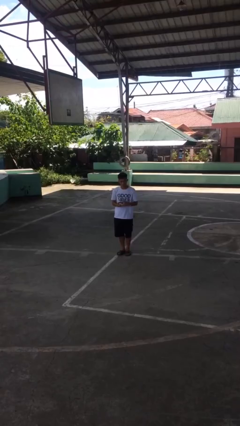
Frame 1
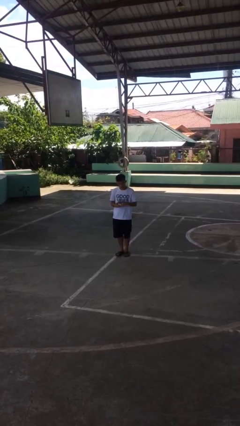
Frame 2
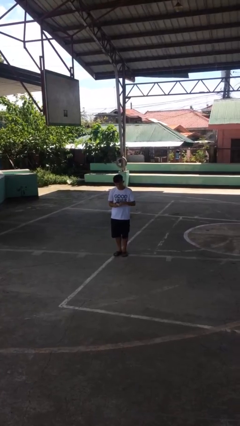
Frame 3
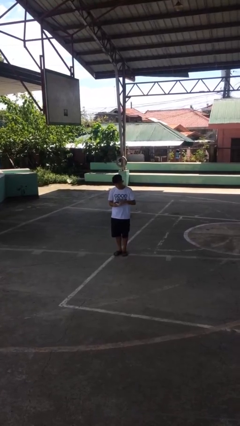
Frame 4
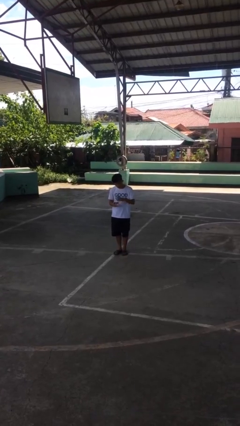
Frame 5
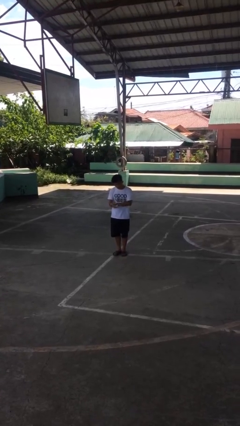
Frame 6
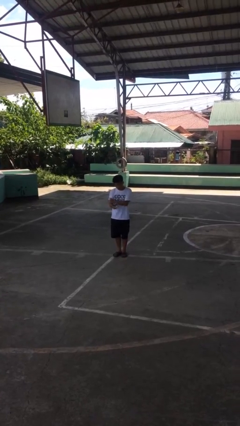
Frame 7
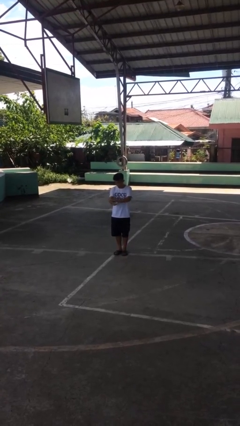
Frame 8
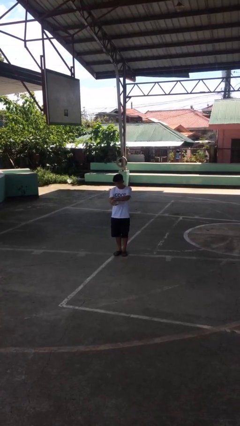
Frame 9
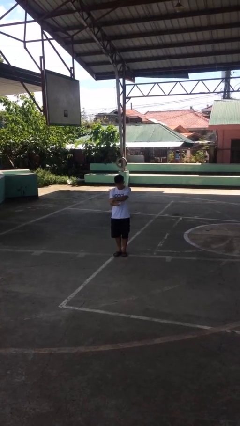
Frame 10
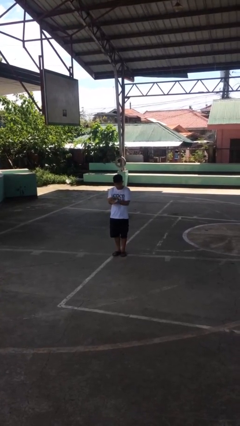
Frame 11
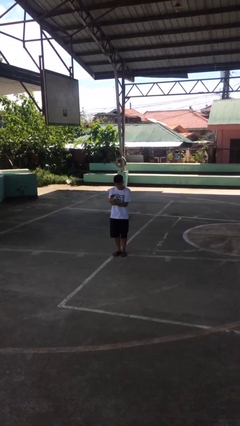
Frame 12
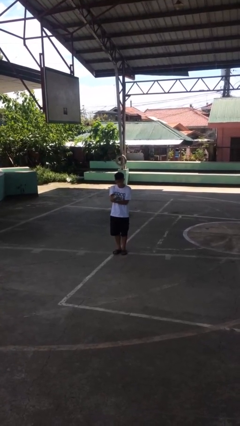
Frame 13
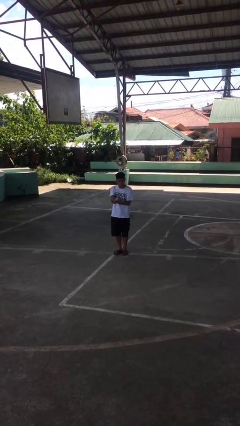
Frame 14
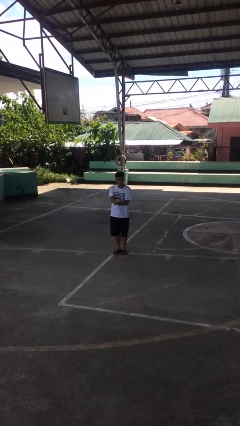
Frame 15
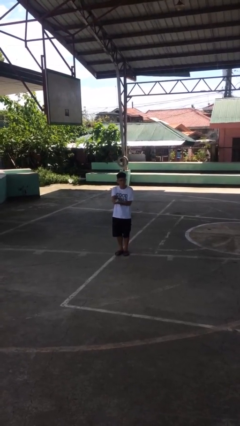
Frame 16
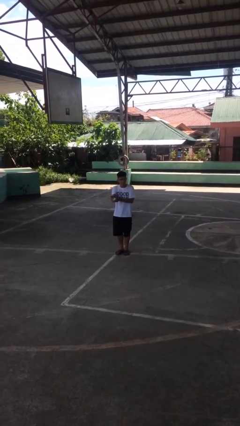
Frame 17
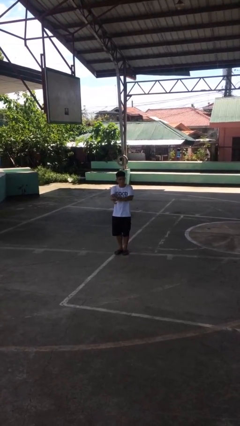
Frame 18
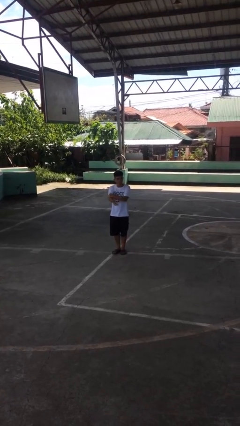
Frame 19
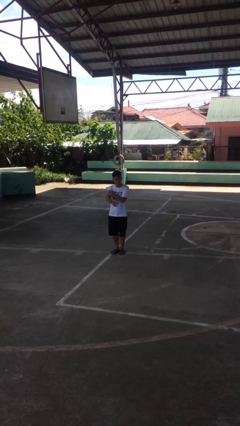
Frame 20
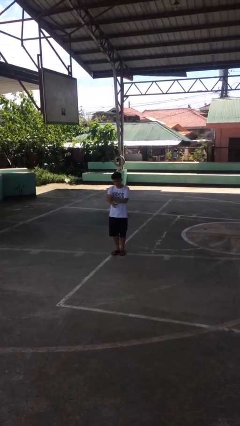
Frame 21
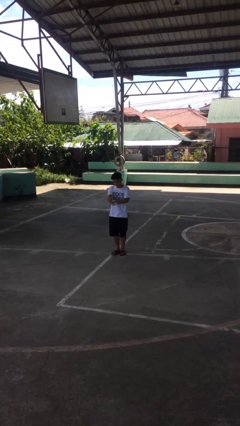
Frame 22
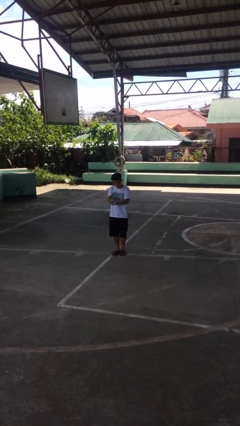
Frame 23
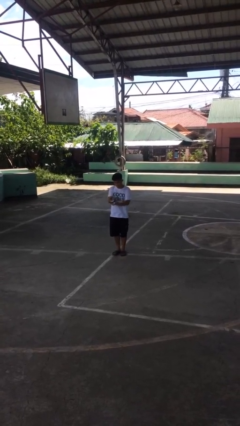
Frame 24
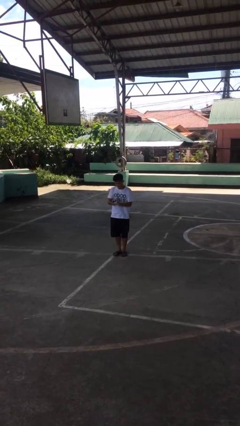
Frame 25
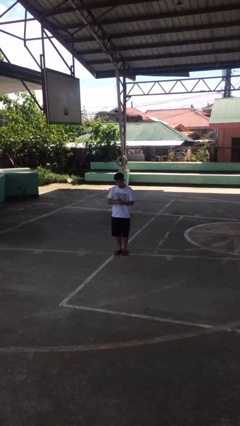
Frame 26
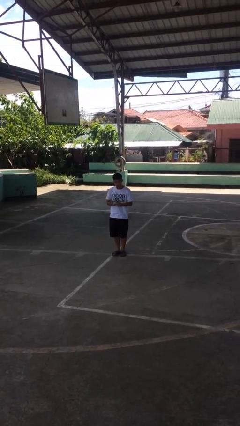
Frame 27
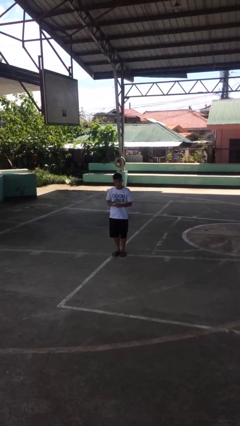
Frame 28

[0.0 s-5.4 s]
person applies sunscreen

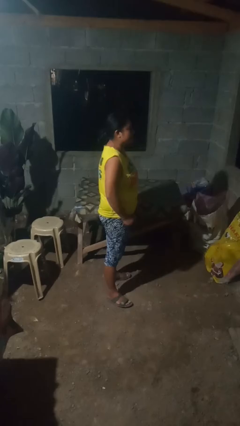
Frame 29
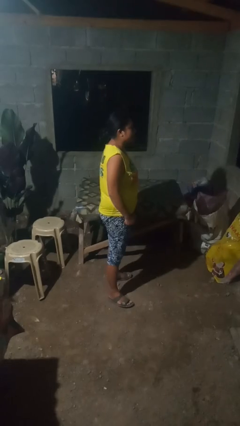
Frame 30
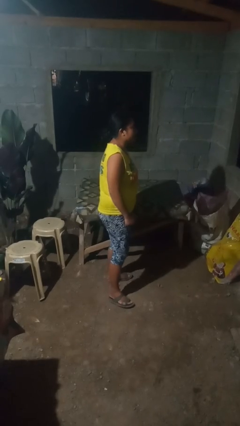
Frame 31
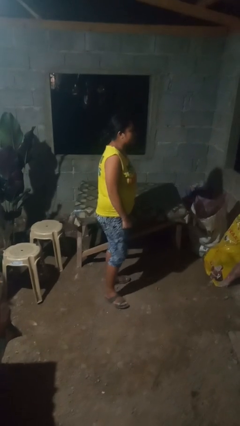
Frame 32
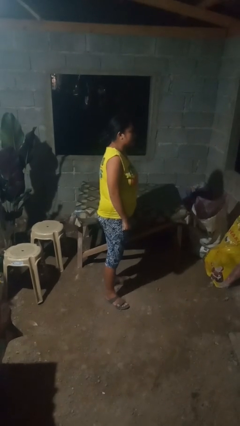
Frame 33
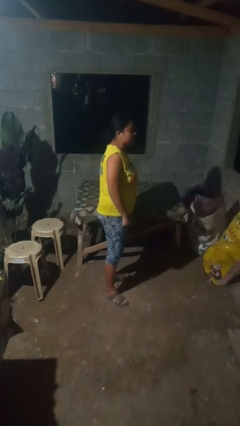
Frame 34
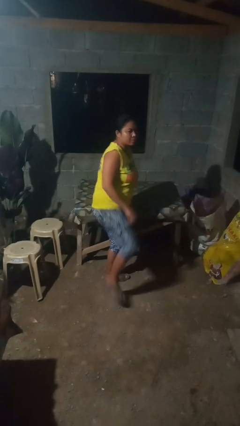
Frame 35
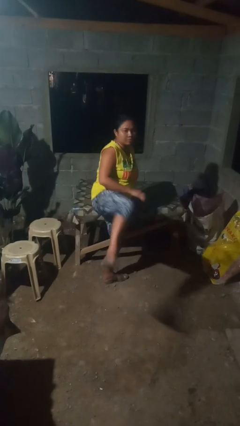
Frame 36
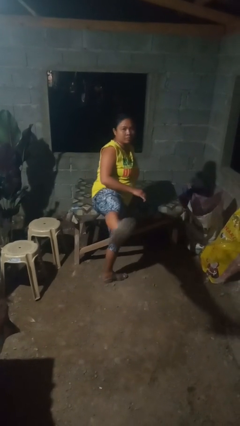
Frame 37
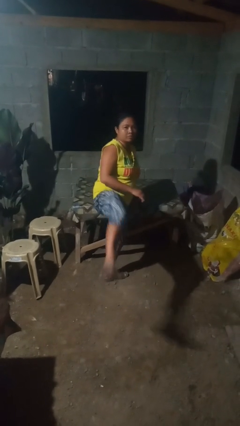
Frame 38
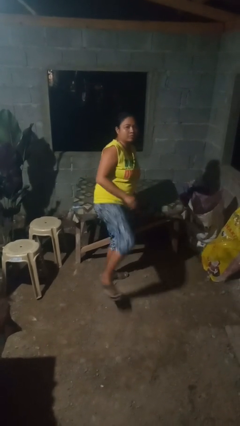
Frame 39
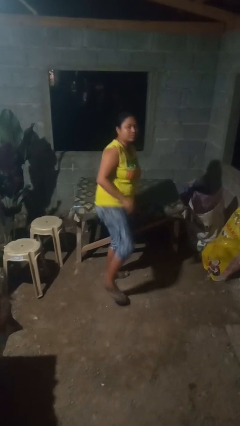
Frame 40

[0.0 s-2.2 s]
person karate kicks

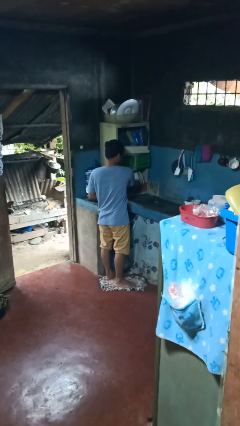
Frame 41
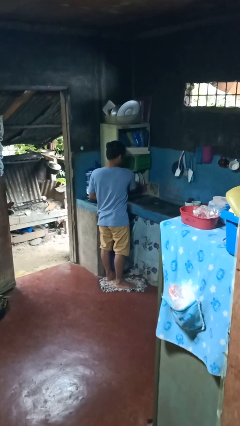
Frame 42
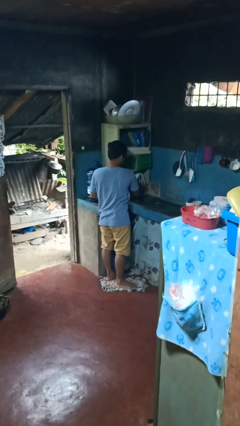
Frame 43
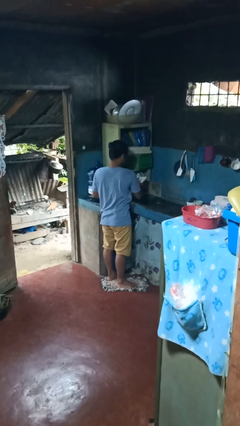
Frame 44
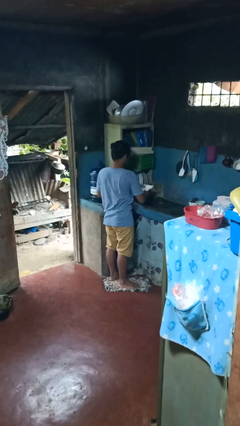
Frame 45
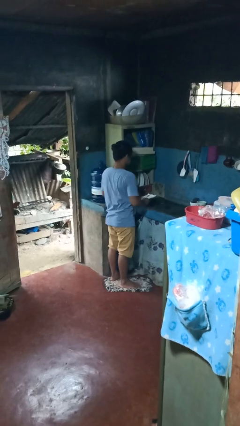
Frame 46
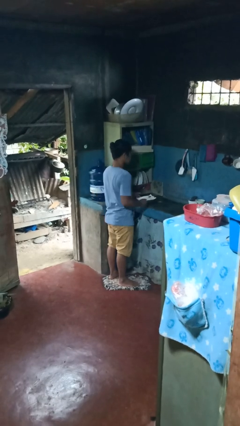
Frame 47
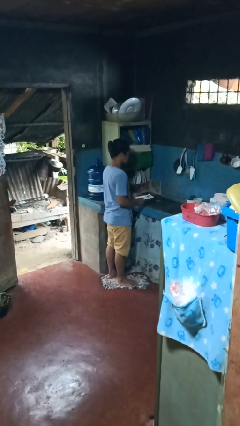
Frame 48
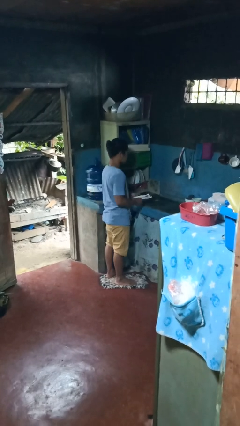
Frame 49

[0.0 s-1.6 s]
person unloads dishwasher

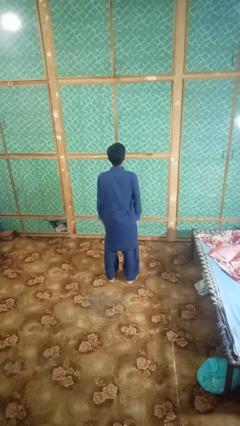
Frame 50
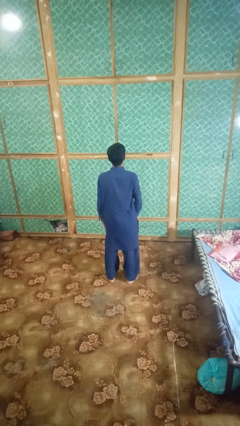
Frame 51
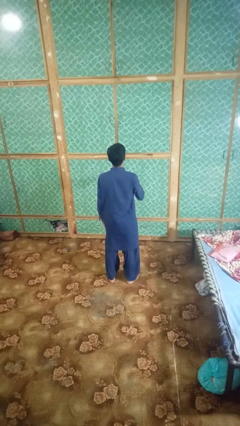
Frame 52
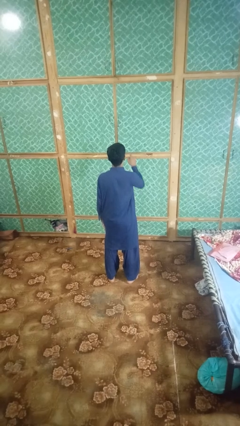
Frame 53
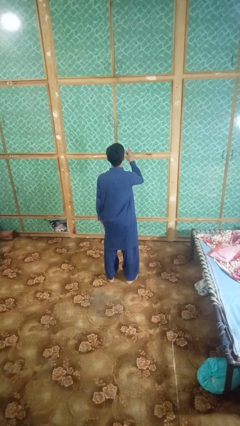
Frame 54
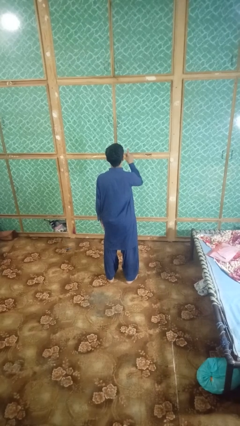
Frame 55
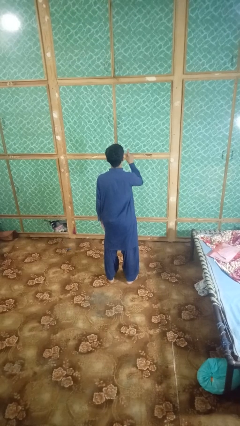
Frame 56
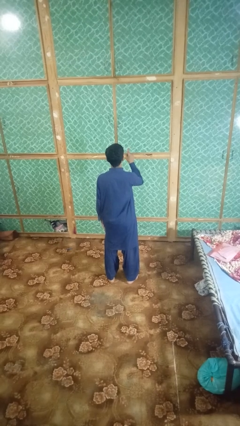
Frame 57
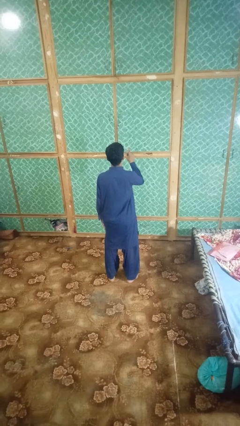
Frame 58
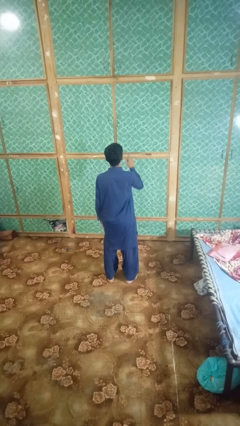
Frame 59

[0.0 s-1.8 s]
person gestures number one

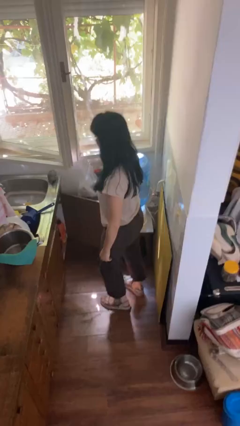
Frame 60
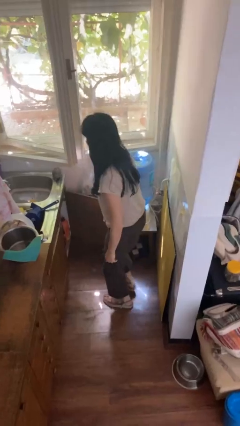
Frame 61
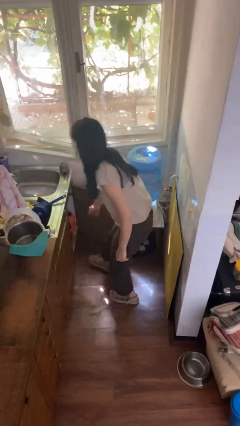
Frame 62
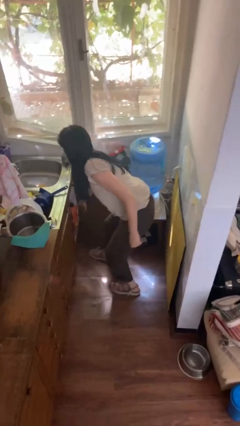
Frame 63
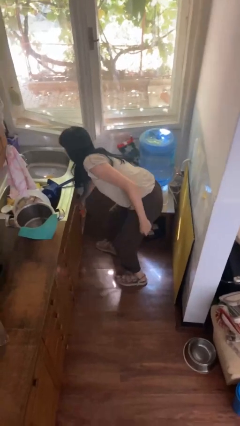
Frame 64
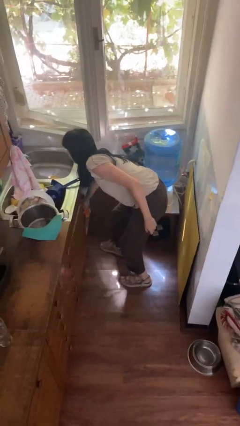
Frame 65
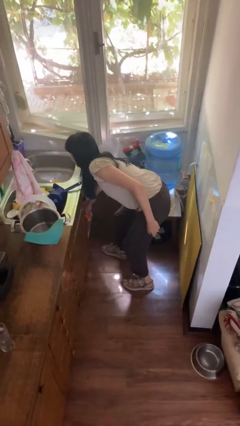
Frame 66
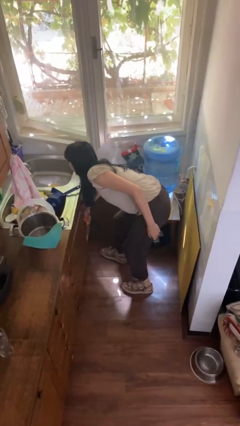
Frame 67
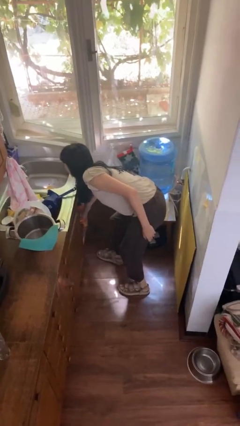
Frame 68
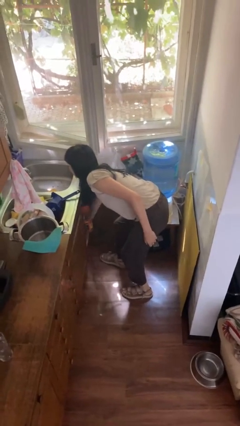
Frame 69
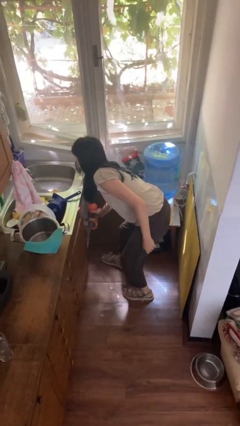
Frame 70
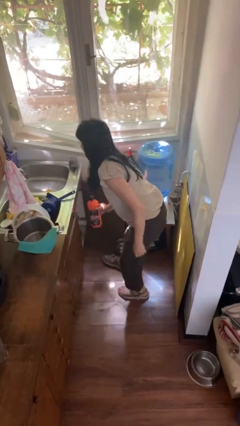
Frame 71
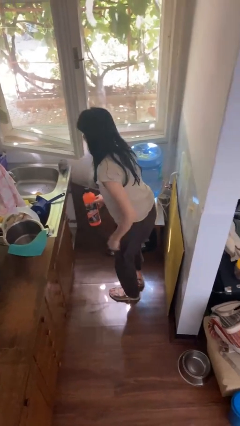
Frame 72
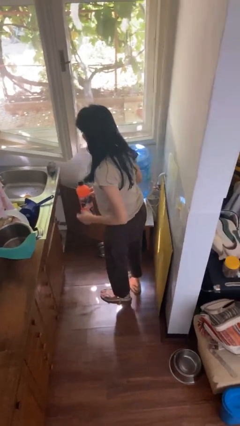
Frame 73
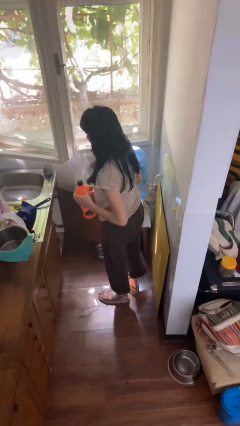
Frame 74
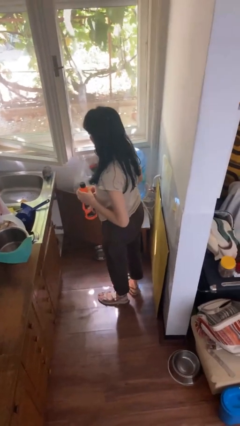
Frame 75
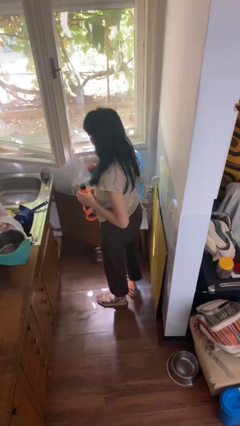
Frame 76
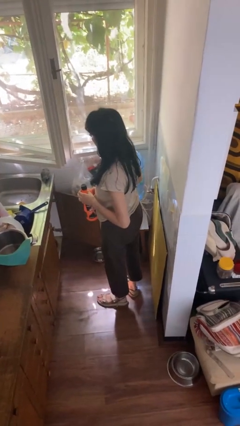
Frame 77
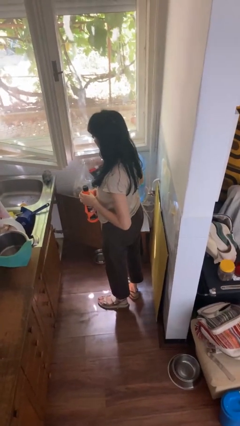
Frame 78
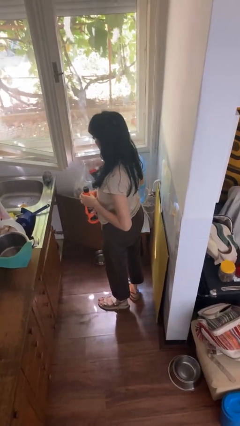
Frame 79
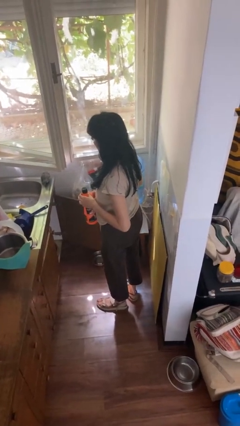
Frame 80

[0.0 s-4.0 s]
person picks up object from cabinet

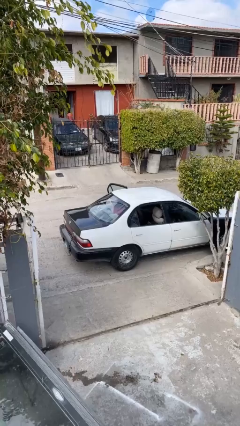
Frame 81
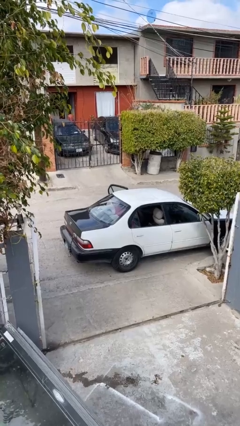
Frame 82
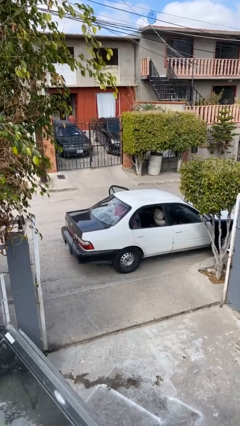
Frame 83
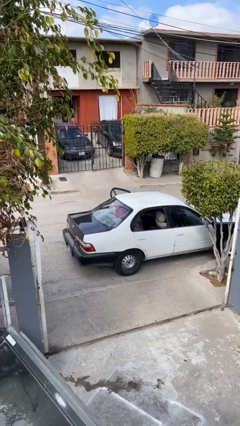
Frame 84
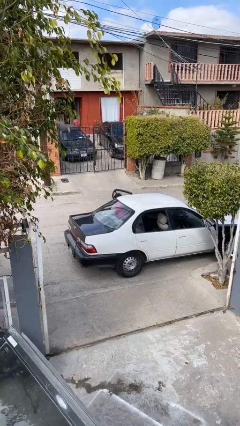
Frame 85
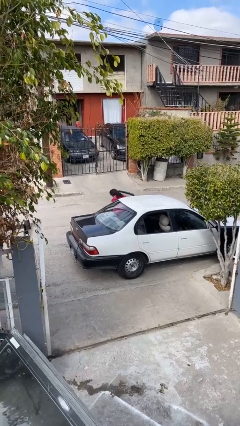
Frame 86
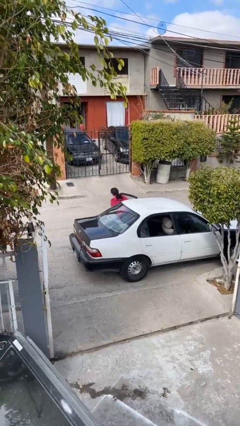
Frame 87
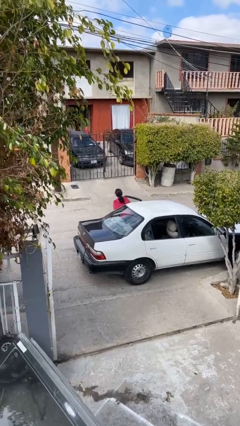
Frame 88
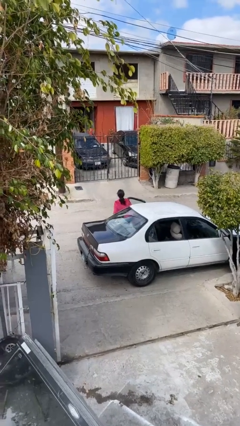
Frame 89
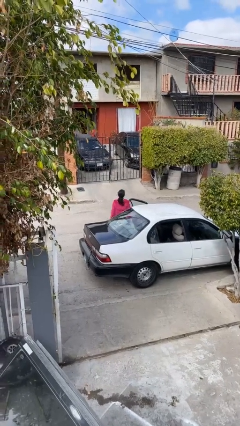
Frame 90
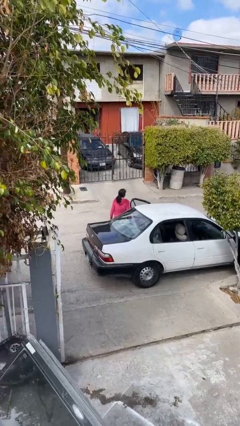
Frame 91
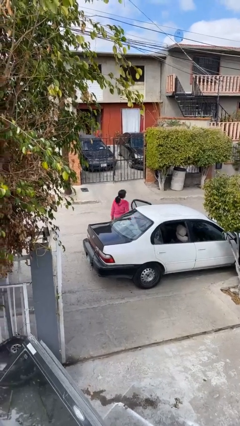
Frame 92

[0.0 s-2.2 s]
person exits car

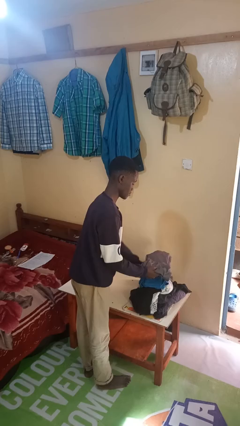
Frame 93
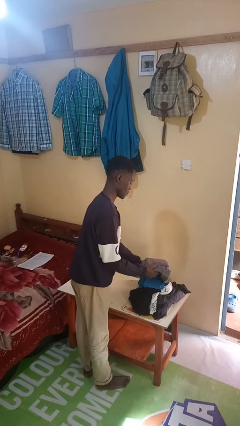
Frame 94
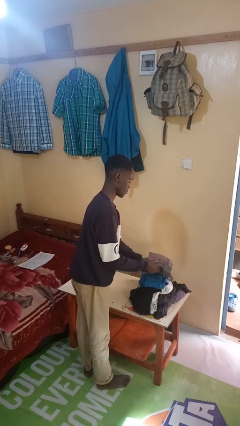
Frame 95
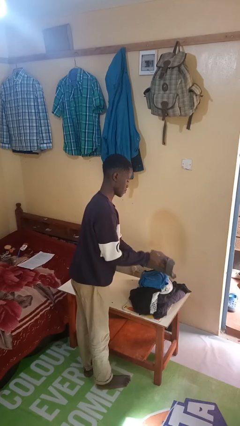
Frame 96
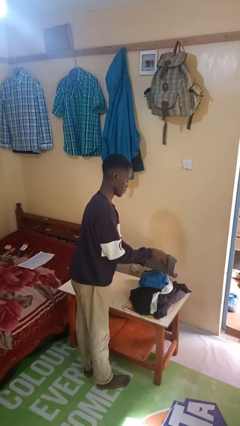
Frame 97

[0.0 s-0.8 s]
person folds pants
